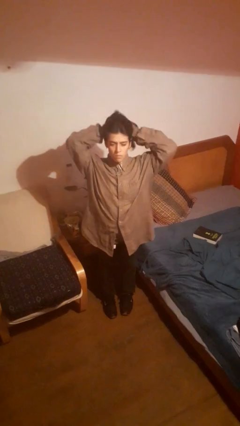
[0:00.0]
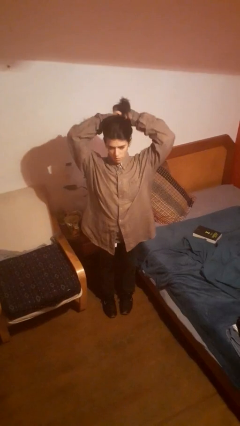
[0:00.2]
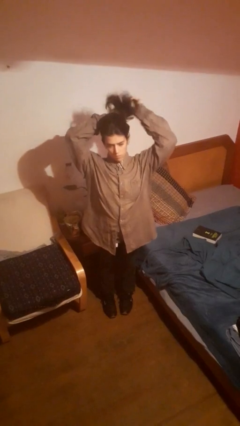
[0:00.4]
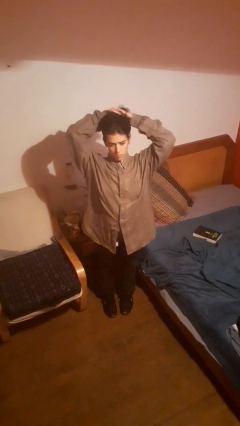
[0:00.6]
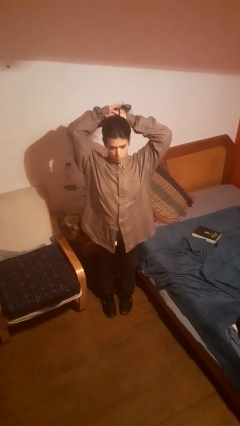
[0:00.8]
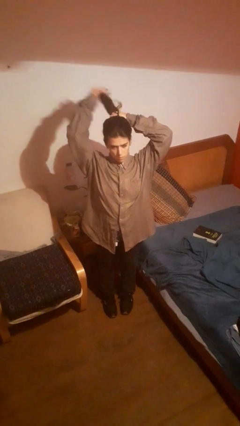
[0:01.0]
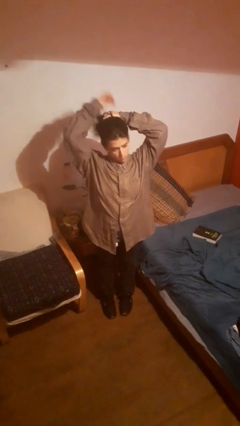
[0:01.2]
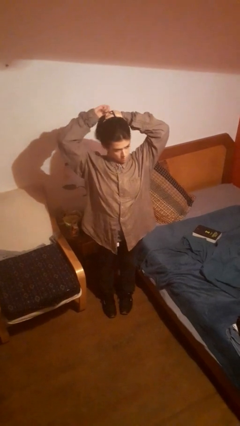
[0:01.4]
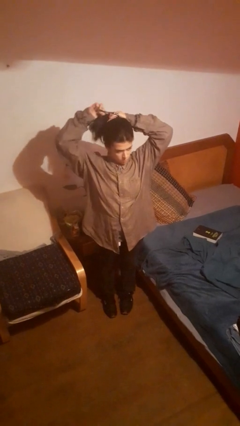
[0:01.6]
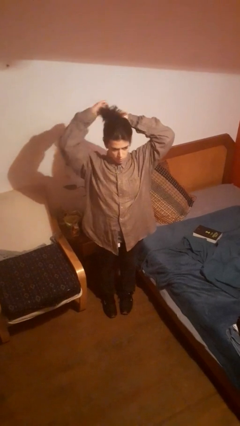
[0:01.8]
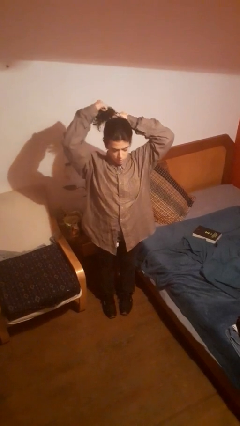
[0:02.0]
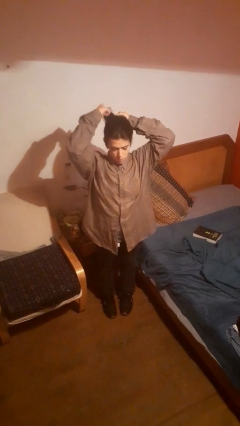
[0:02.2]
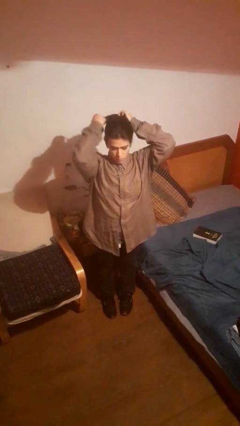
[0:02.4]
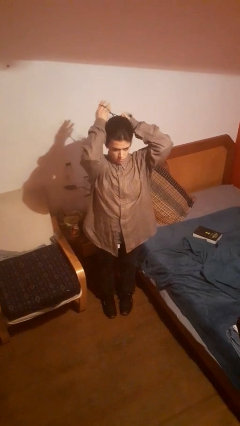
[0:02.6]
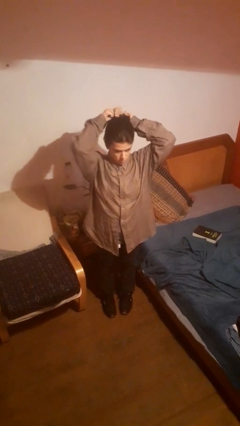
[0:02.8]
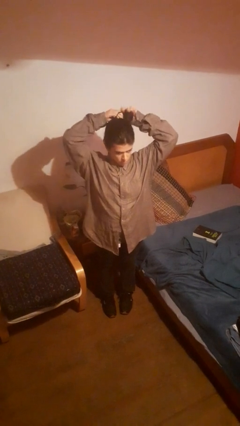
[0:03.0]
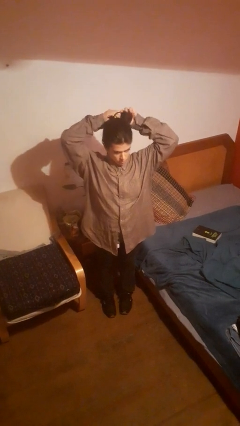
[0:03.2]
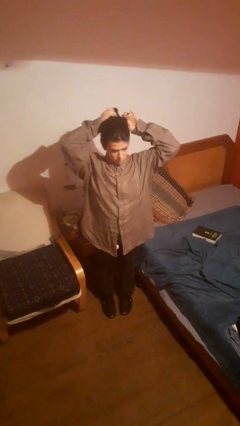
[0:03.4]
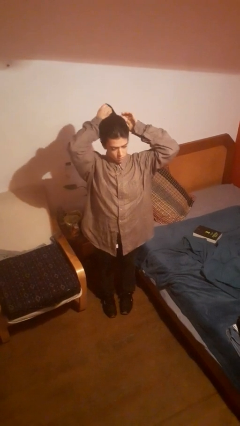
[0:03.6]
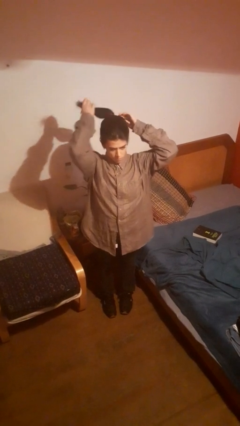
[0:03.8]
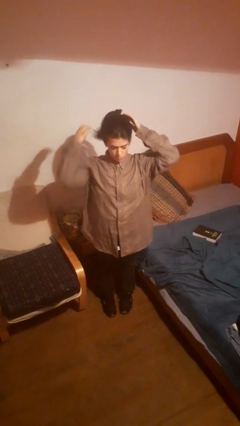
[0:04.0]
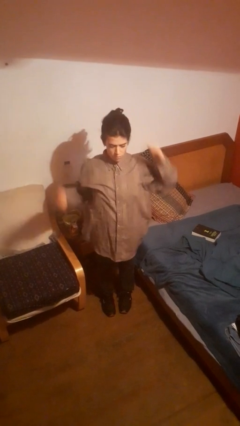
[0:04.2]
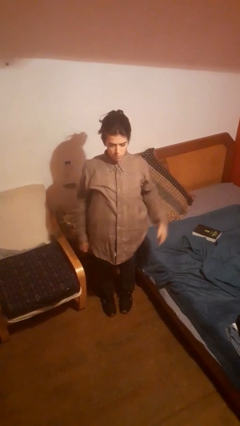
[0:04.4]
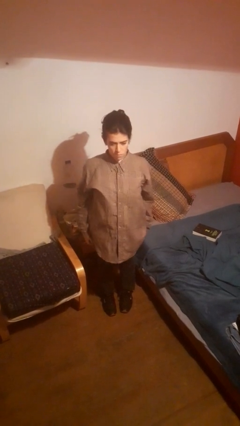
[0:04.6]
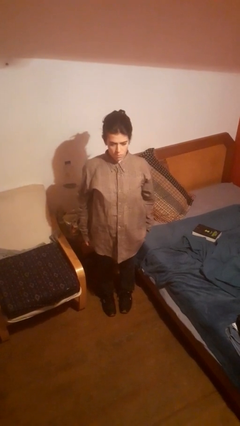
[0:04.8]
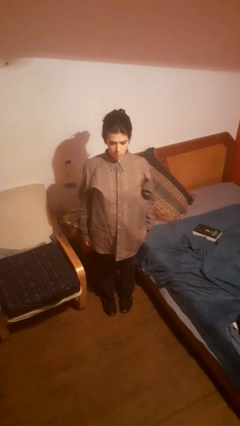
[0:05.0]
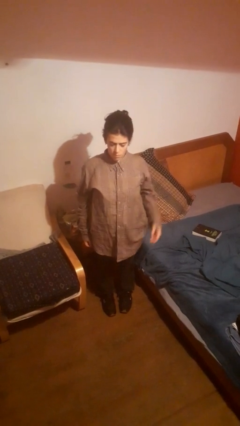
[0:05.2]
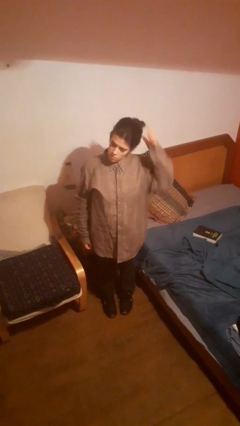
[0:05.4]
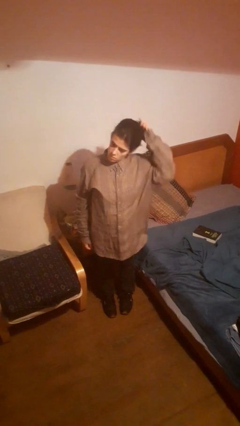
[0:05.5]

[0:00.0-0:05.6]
person puts hair in ponytail

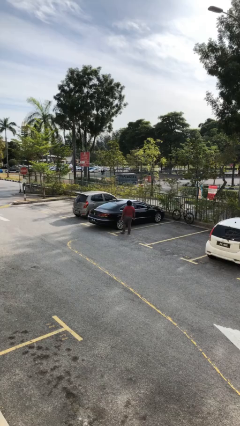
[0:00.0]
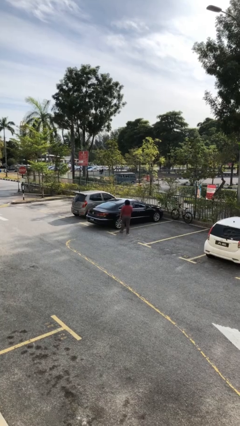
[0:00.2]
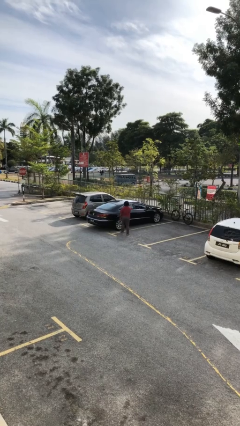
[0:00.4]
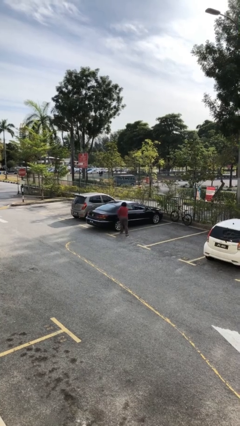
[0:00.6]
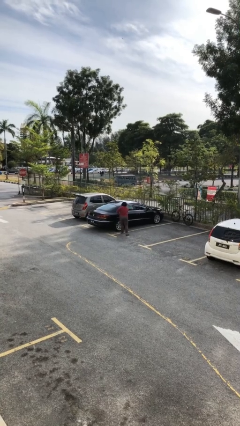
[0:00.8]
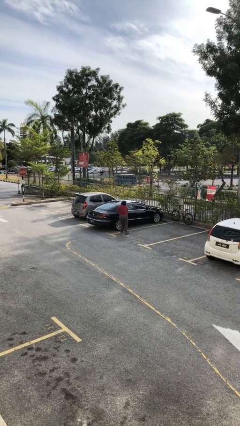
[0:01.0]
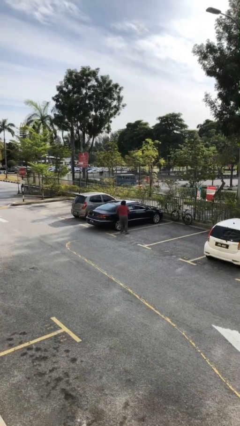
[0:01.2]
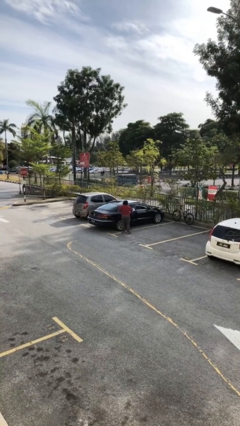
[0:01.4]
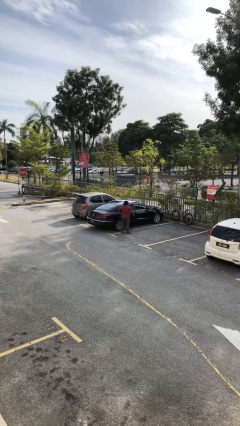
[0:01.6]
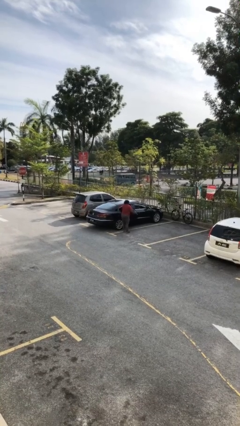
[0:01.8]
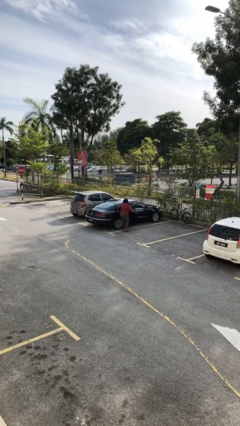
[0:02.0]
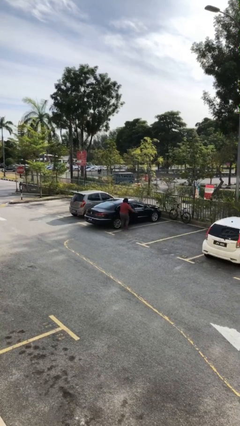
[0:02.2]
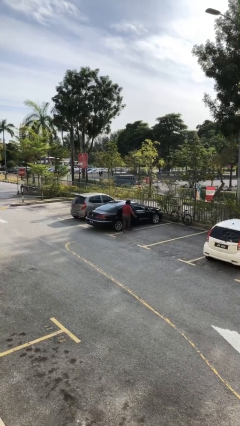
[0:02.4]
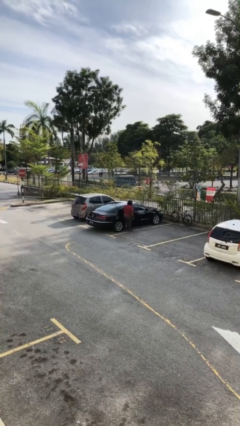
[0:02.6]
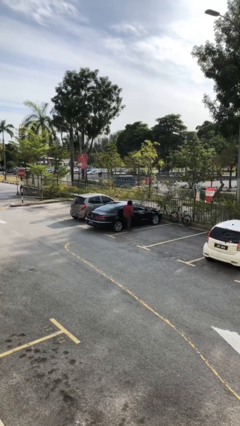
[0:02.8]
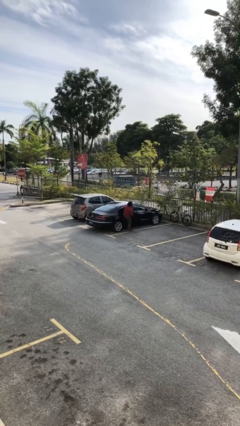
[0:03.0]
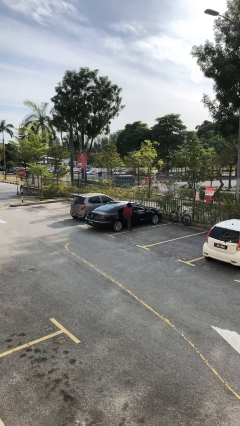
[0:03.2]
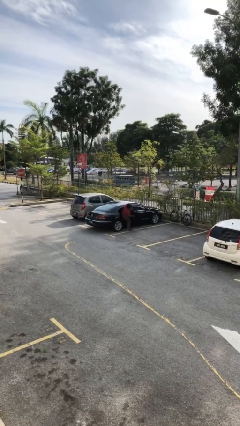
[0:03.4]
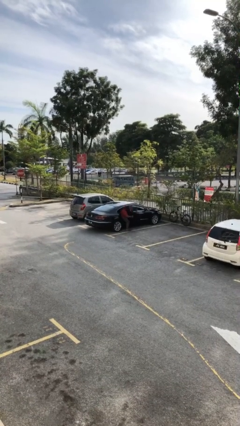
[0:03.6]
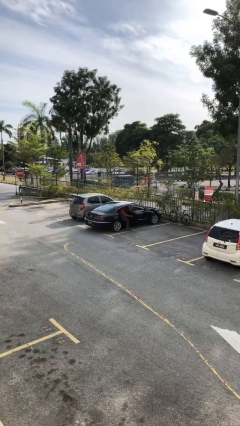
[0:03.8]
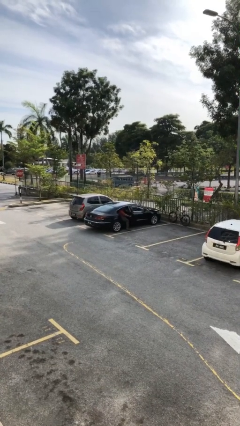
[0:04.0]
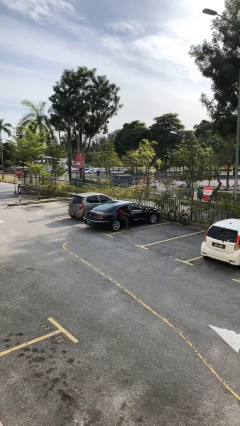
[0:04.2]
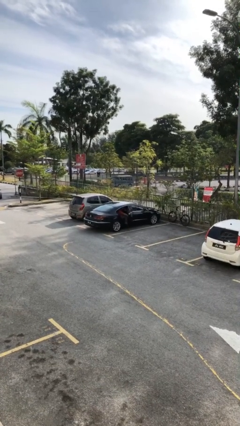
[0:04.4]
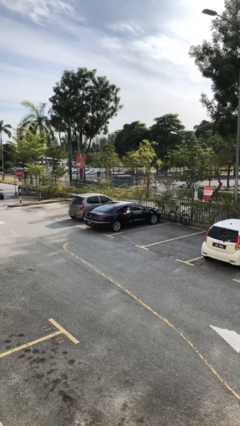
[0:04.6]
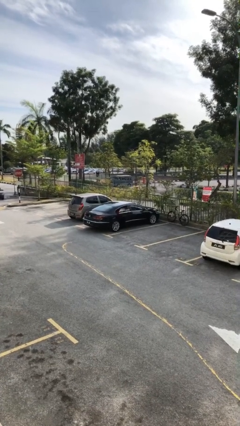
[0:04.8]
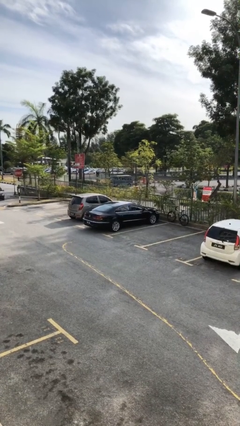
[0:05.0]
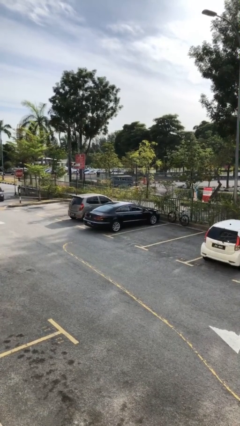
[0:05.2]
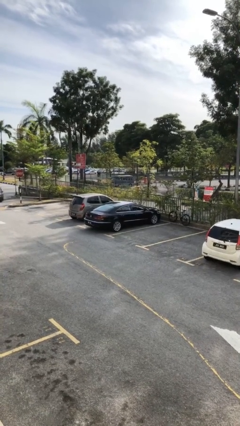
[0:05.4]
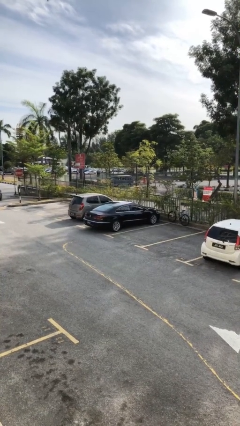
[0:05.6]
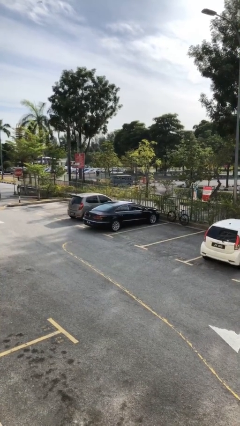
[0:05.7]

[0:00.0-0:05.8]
car picks up person

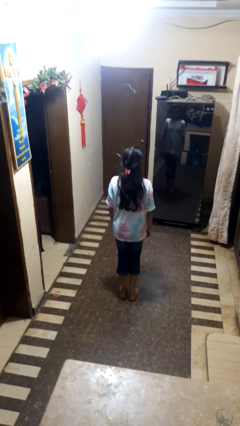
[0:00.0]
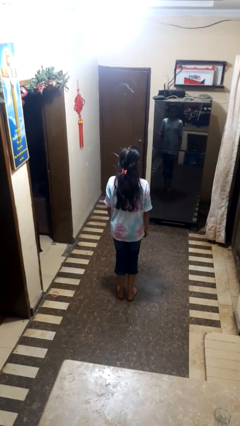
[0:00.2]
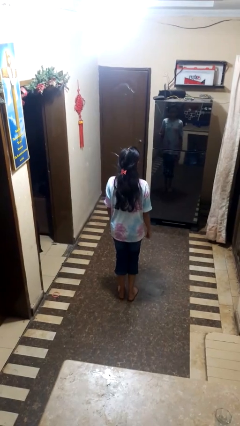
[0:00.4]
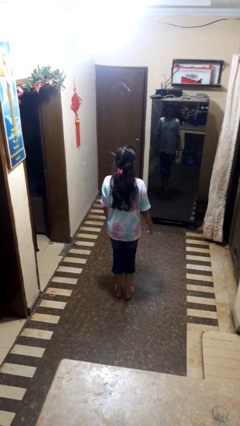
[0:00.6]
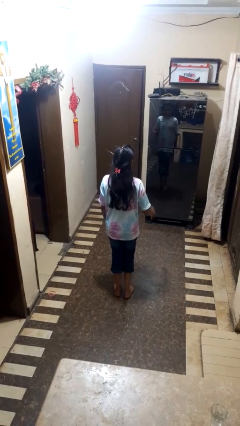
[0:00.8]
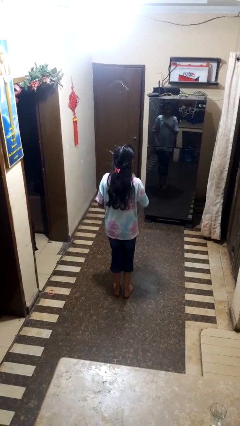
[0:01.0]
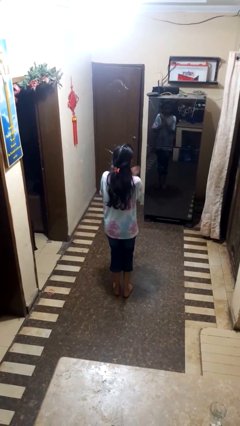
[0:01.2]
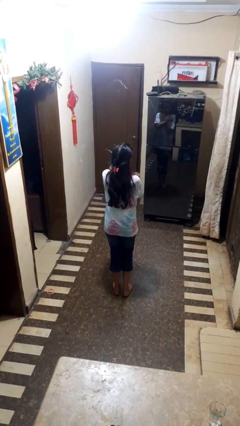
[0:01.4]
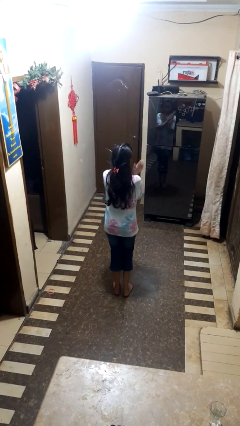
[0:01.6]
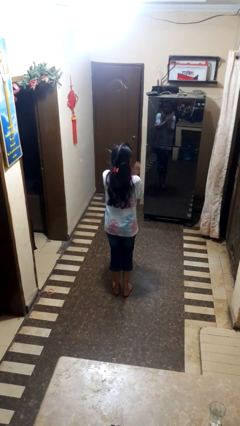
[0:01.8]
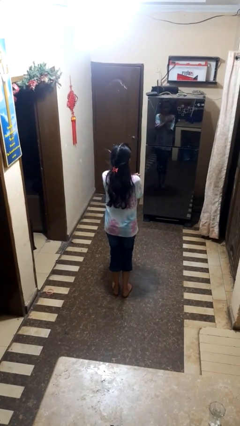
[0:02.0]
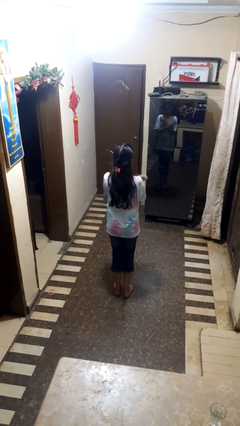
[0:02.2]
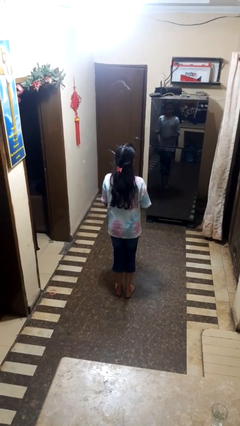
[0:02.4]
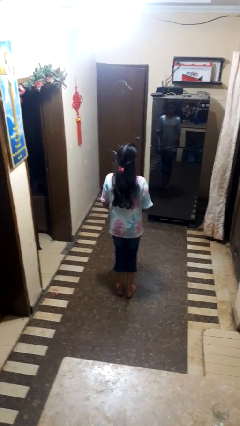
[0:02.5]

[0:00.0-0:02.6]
person drums on chest

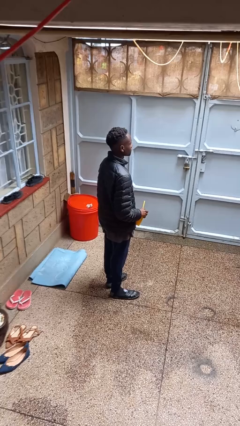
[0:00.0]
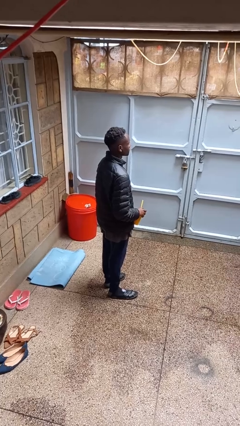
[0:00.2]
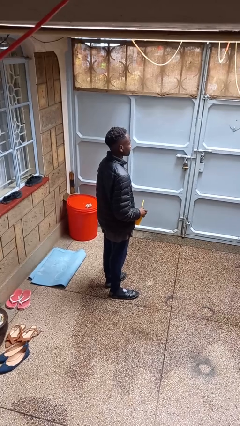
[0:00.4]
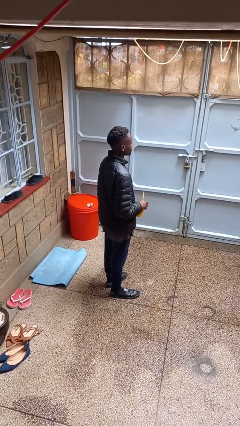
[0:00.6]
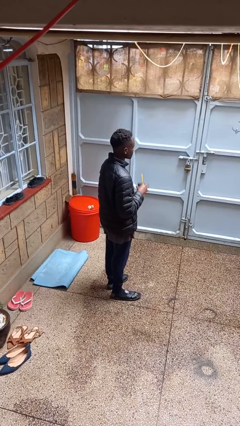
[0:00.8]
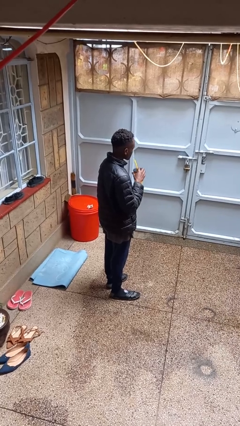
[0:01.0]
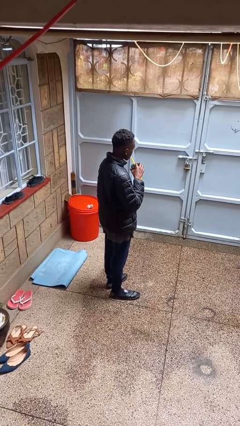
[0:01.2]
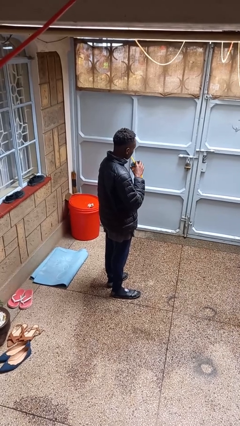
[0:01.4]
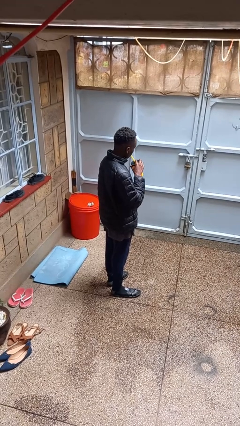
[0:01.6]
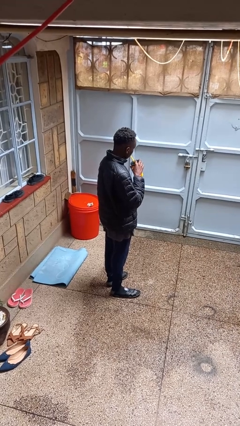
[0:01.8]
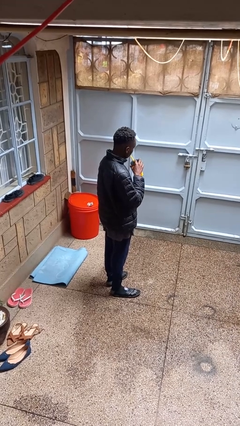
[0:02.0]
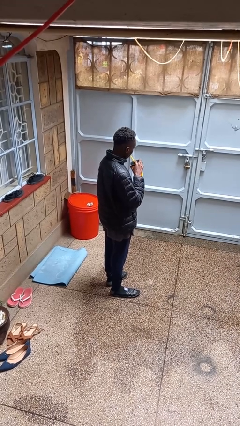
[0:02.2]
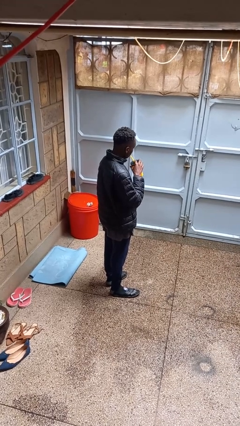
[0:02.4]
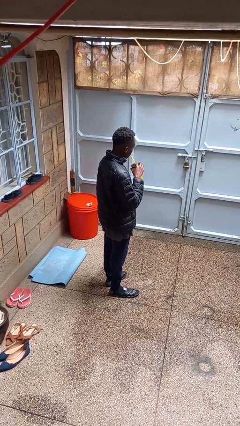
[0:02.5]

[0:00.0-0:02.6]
person drinks from straw

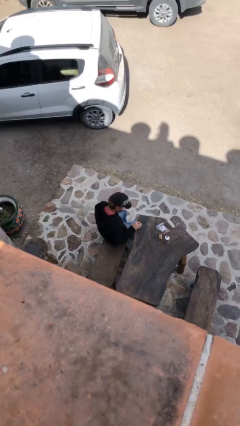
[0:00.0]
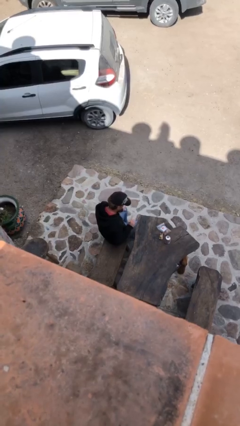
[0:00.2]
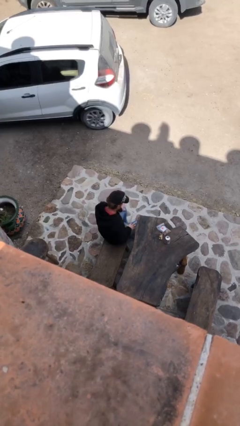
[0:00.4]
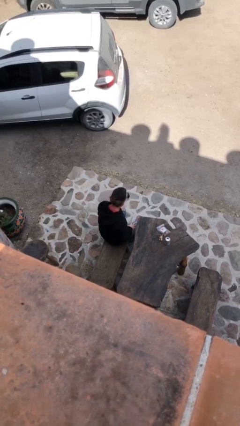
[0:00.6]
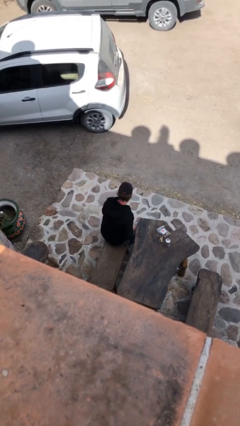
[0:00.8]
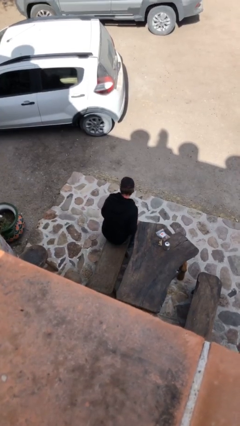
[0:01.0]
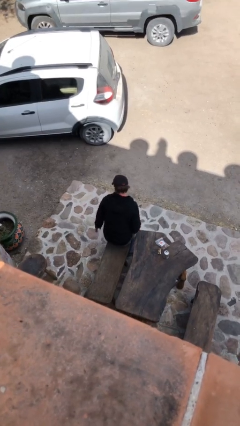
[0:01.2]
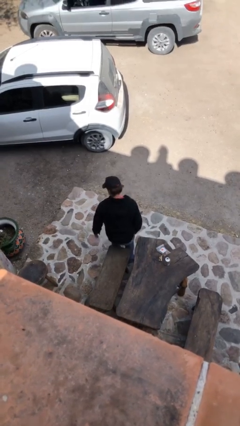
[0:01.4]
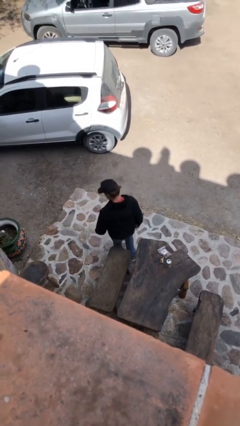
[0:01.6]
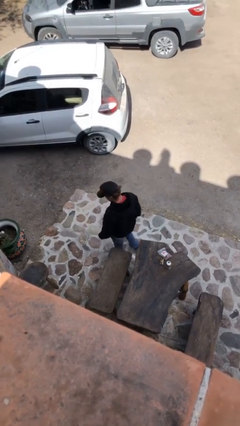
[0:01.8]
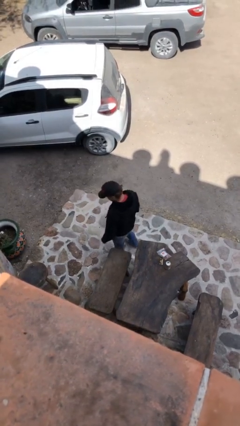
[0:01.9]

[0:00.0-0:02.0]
person stands up
